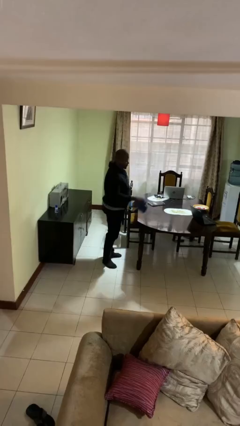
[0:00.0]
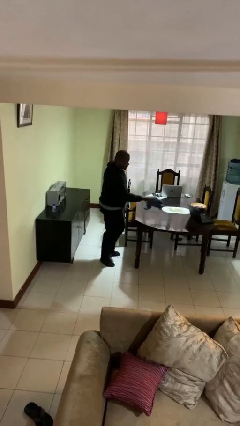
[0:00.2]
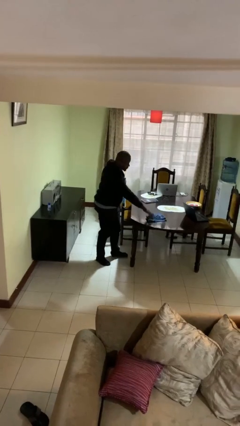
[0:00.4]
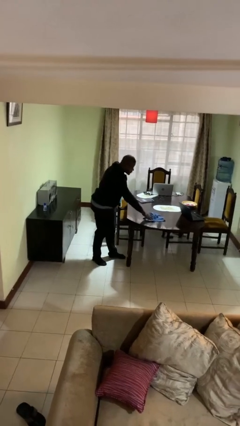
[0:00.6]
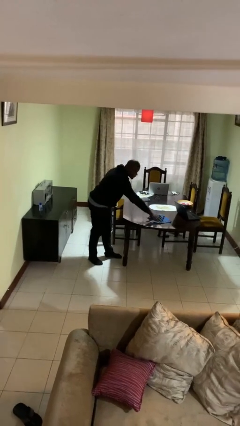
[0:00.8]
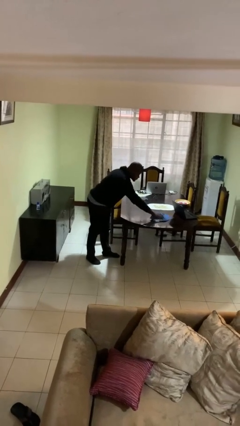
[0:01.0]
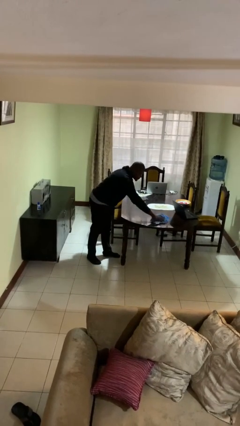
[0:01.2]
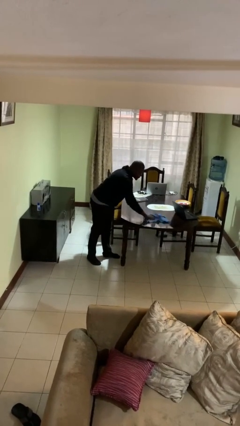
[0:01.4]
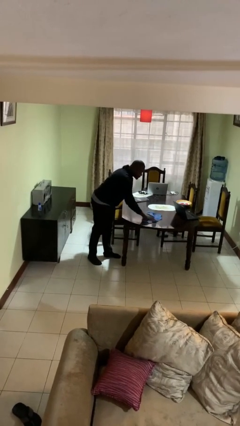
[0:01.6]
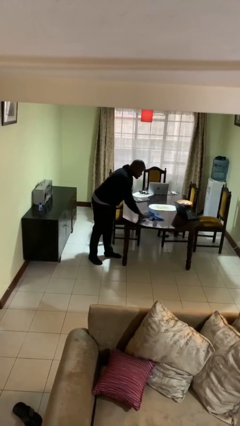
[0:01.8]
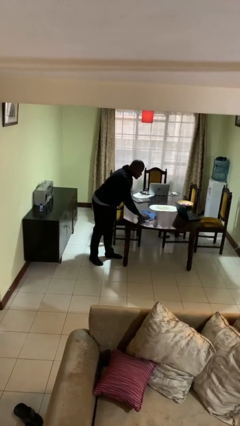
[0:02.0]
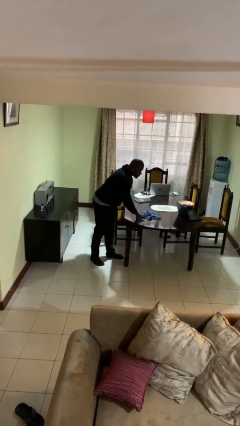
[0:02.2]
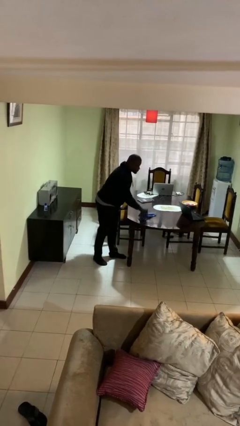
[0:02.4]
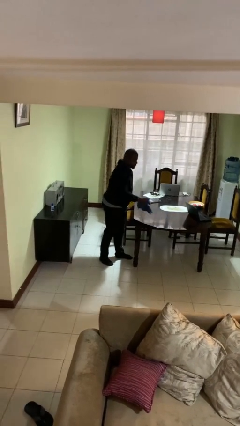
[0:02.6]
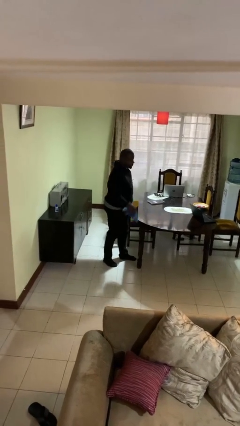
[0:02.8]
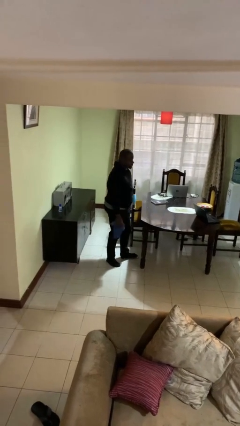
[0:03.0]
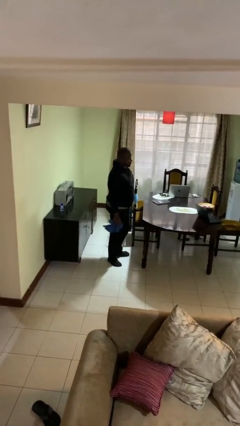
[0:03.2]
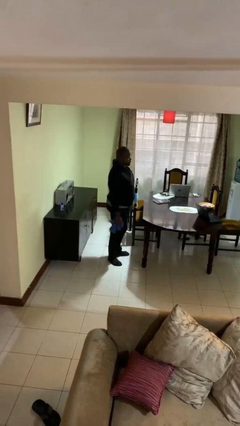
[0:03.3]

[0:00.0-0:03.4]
person cleans table with rag

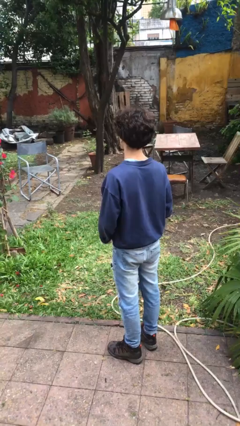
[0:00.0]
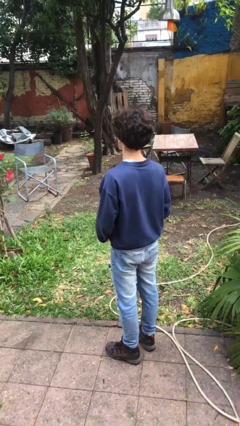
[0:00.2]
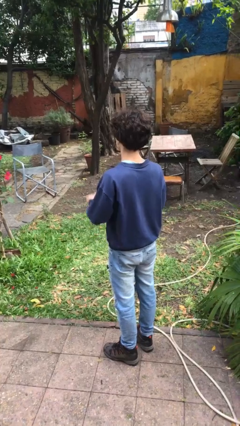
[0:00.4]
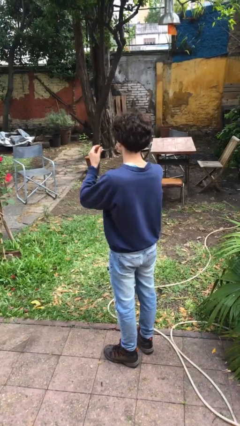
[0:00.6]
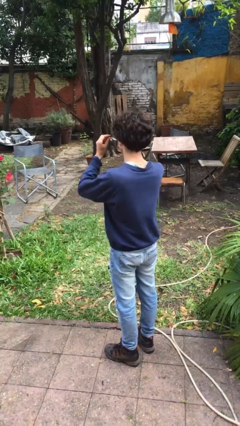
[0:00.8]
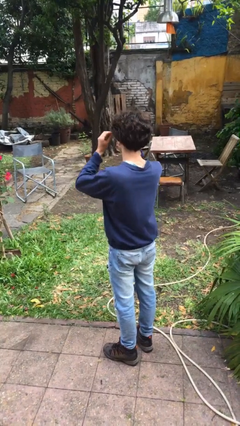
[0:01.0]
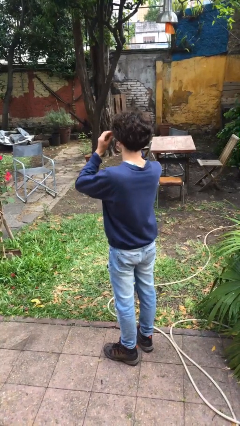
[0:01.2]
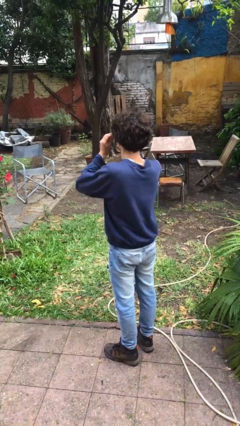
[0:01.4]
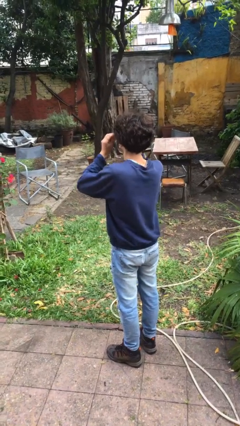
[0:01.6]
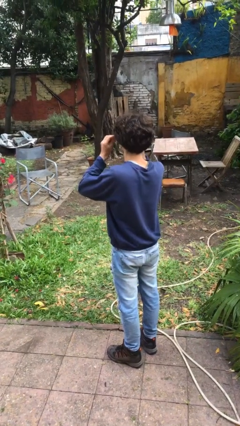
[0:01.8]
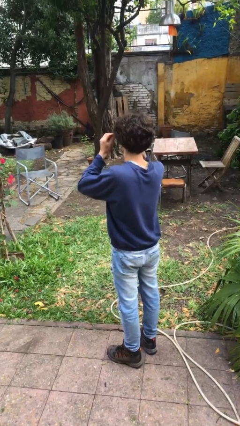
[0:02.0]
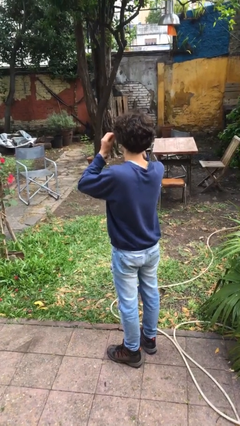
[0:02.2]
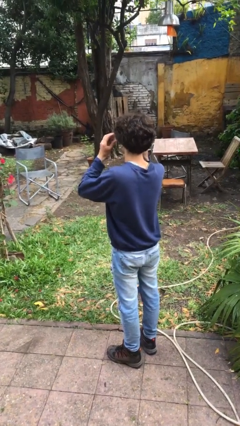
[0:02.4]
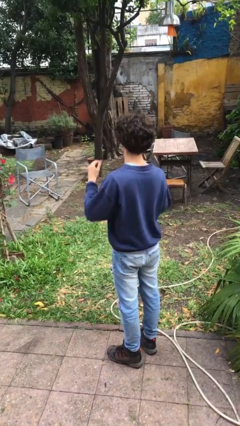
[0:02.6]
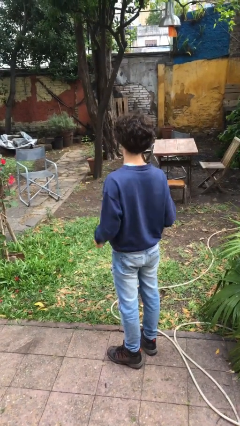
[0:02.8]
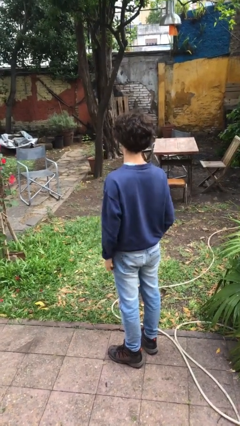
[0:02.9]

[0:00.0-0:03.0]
person puts on glasses

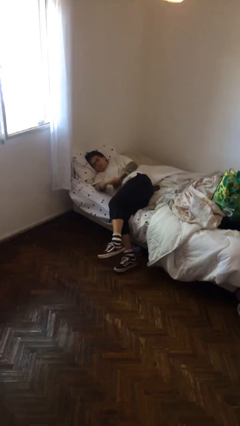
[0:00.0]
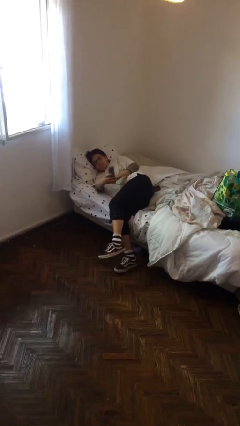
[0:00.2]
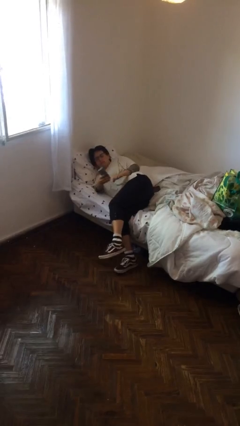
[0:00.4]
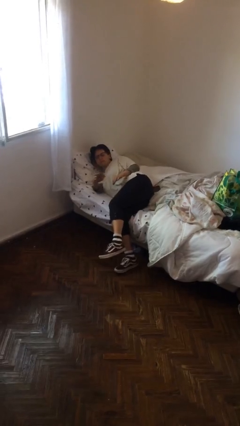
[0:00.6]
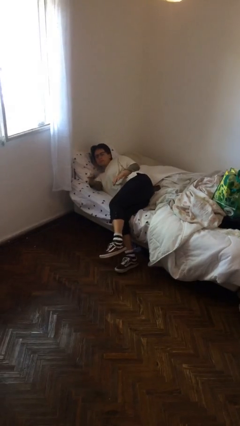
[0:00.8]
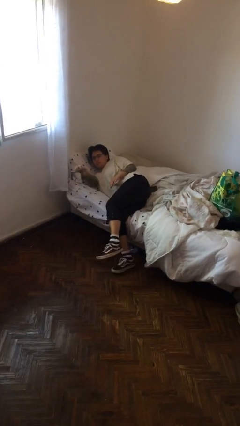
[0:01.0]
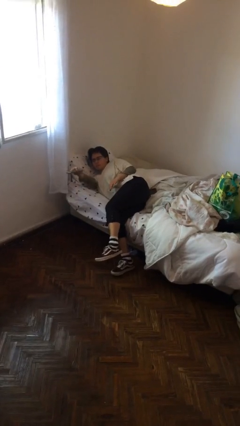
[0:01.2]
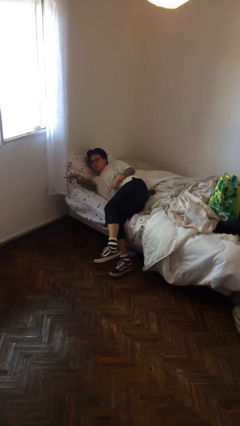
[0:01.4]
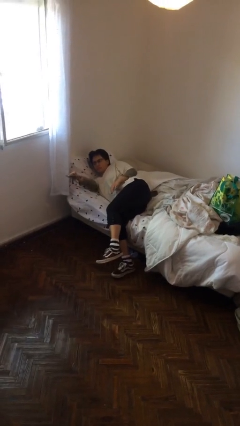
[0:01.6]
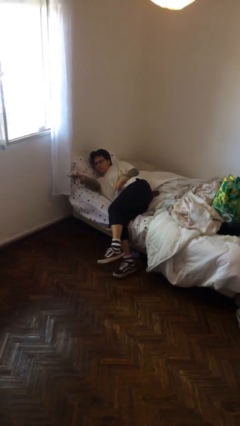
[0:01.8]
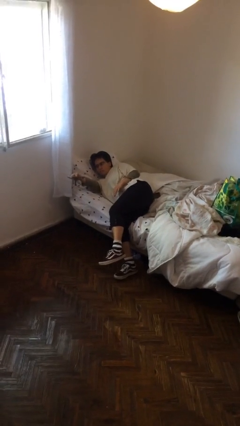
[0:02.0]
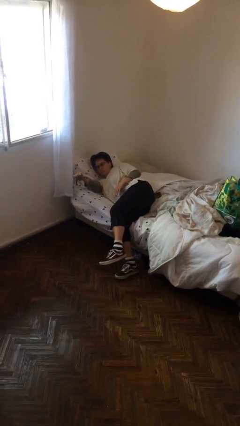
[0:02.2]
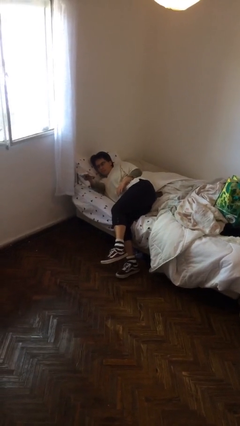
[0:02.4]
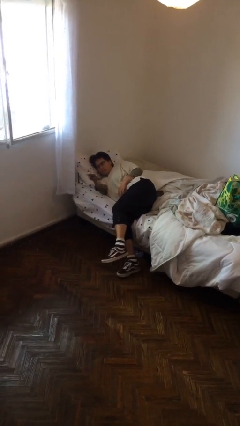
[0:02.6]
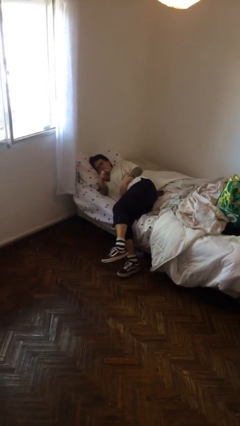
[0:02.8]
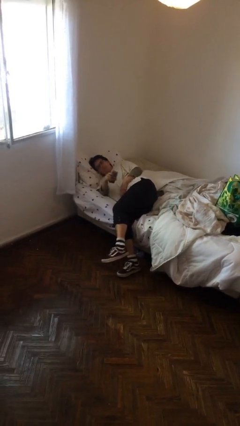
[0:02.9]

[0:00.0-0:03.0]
person uses television remote

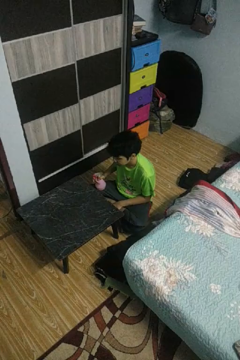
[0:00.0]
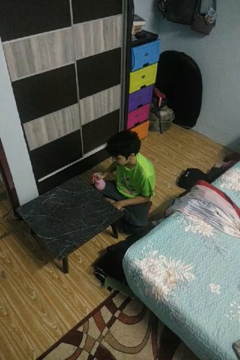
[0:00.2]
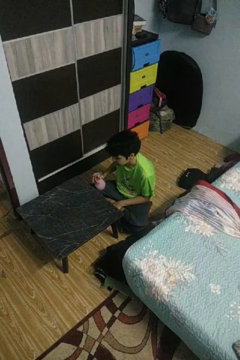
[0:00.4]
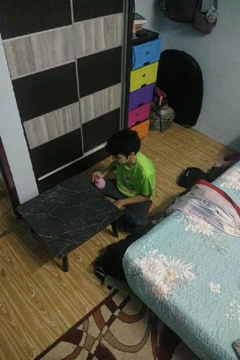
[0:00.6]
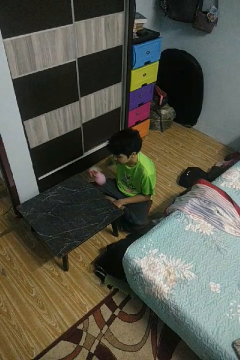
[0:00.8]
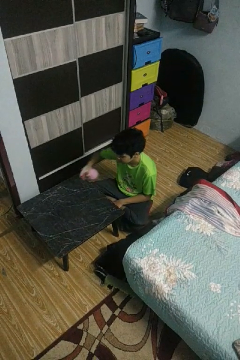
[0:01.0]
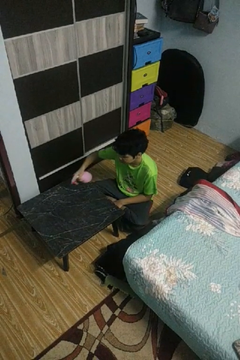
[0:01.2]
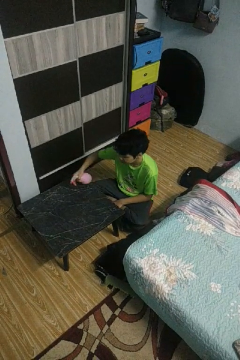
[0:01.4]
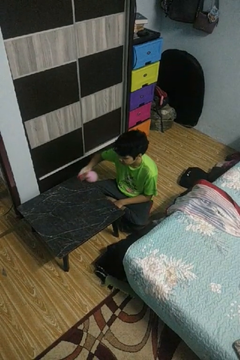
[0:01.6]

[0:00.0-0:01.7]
person sprays from bottle

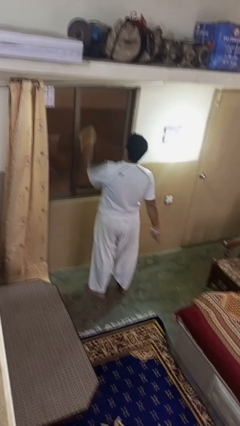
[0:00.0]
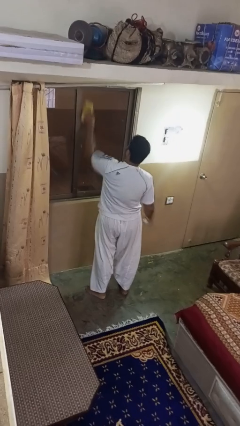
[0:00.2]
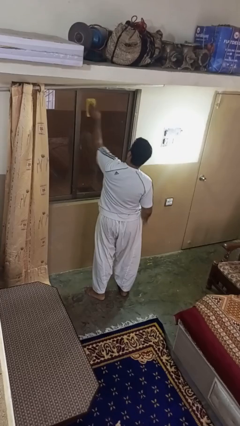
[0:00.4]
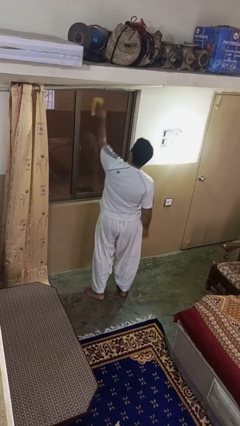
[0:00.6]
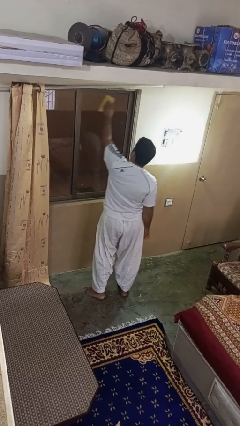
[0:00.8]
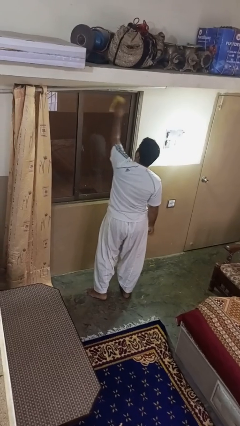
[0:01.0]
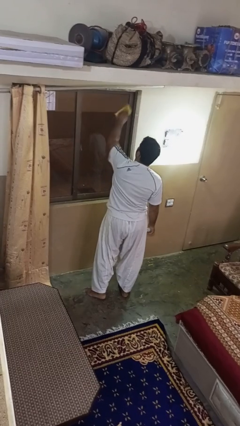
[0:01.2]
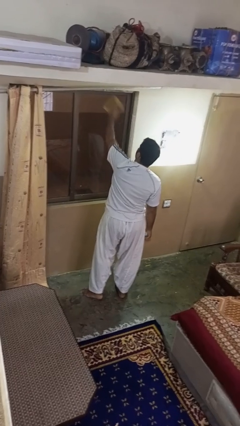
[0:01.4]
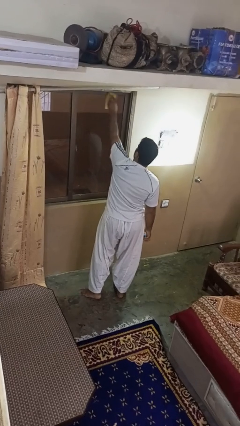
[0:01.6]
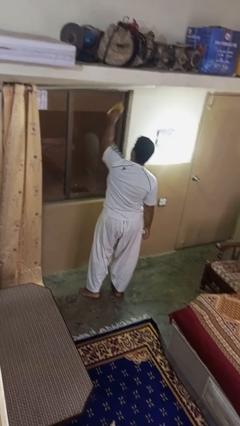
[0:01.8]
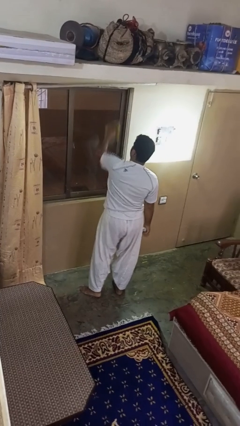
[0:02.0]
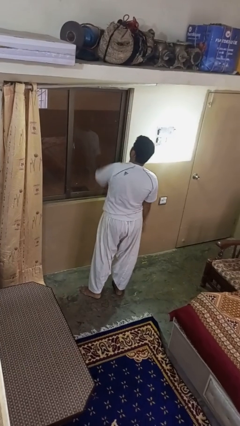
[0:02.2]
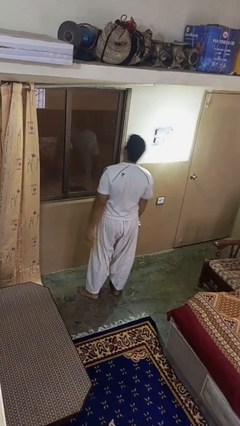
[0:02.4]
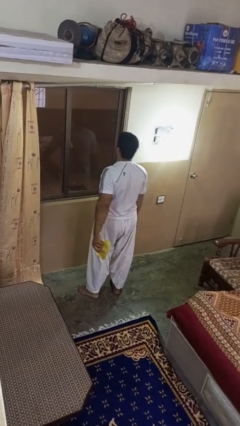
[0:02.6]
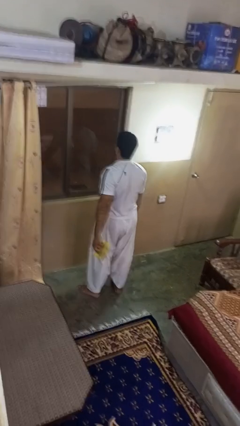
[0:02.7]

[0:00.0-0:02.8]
person washes window

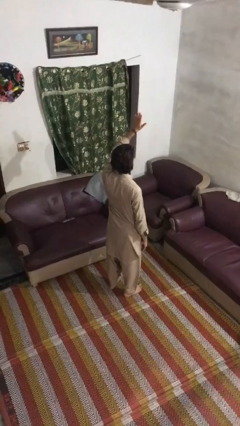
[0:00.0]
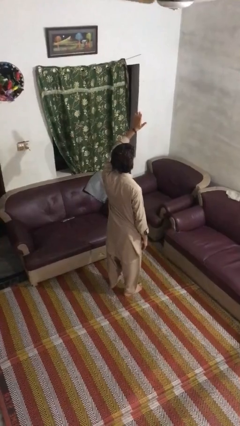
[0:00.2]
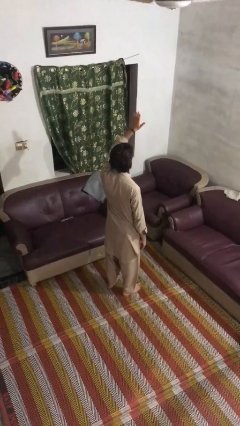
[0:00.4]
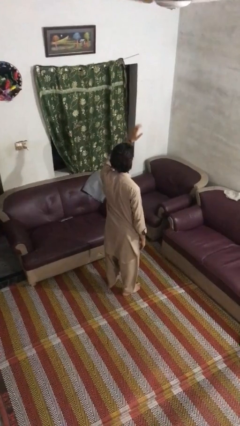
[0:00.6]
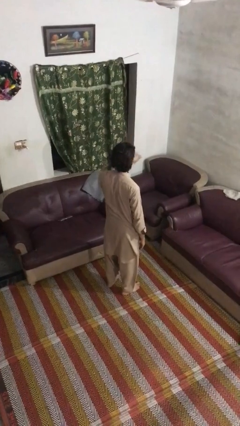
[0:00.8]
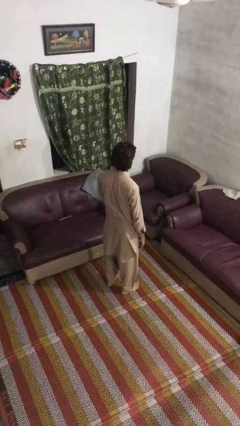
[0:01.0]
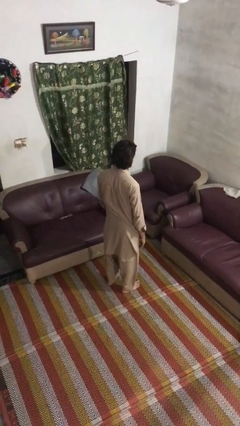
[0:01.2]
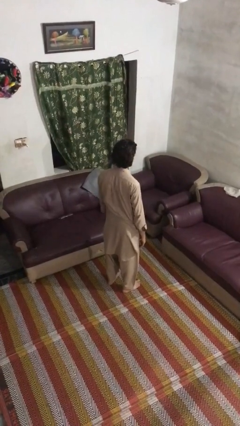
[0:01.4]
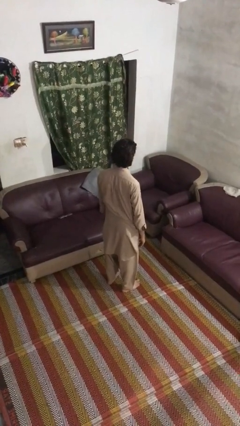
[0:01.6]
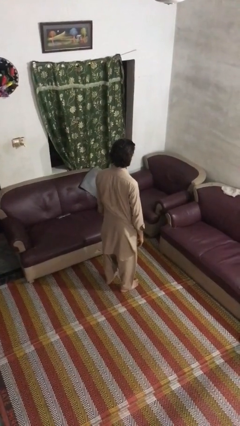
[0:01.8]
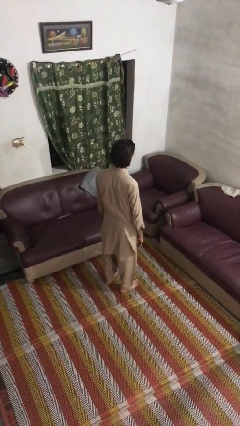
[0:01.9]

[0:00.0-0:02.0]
person gestures lower hand

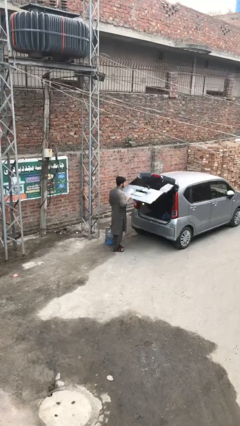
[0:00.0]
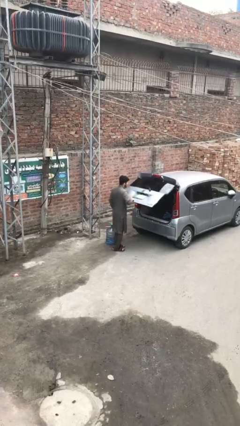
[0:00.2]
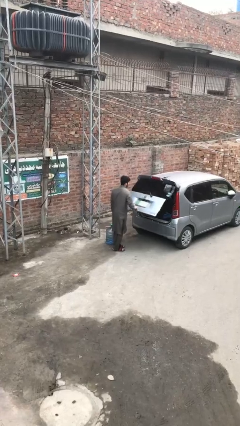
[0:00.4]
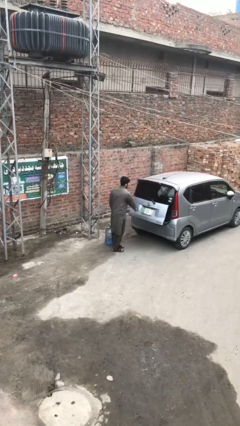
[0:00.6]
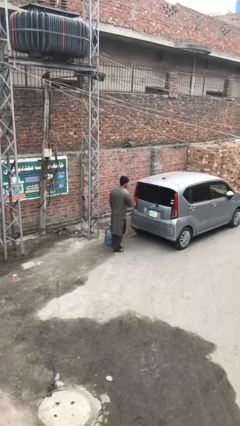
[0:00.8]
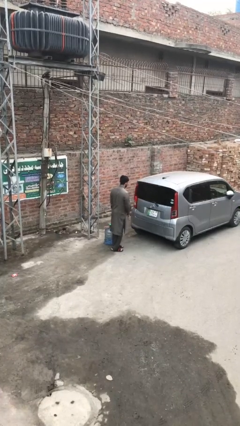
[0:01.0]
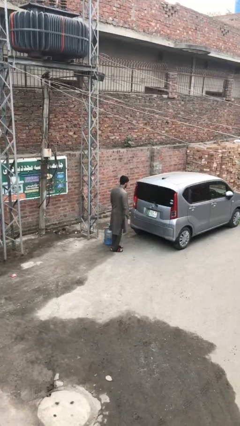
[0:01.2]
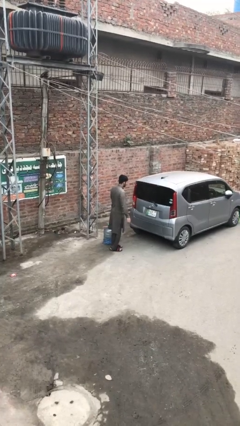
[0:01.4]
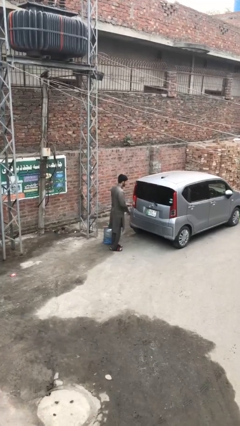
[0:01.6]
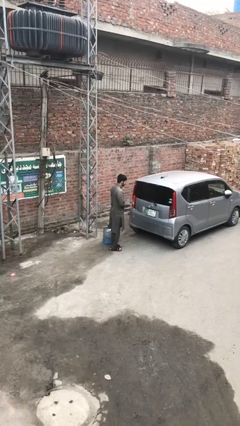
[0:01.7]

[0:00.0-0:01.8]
person closes car trunk
